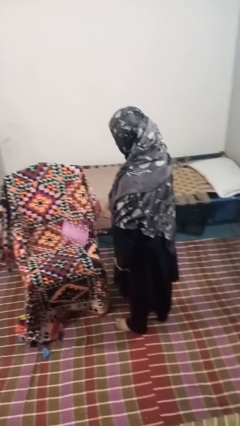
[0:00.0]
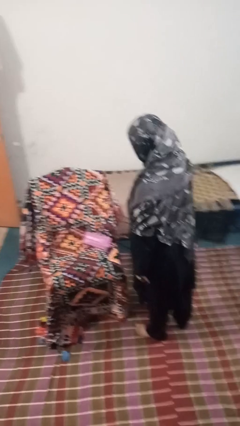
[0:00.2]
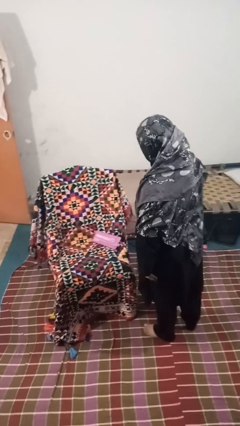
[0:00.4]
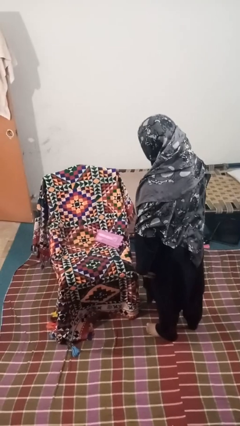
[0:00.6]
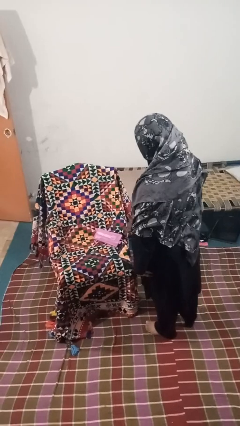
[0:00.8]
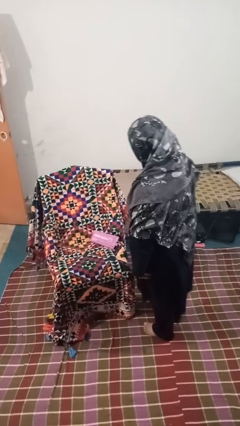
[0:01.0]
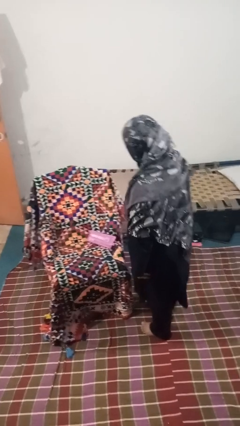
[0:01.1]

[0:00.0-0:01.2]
person puts down object on couch

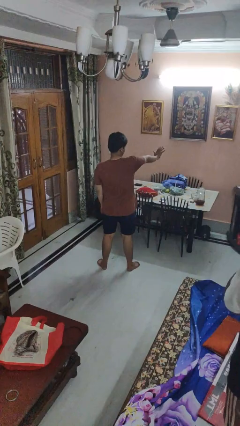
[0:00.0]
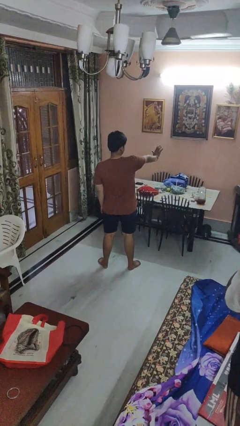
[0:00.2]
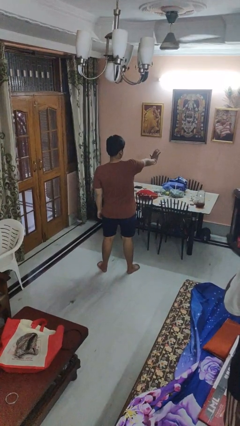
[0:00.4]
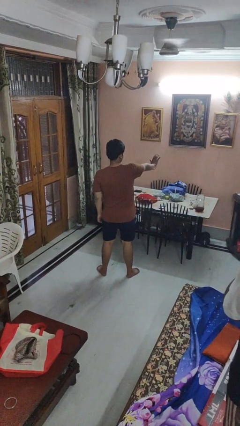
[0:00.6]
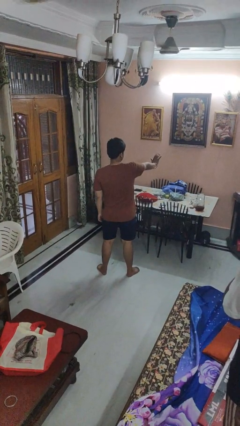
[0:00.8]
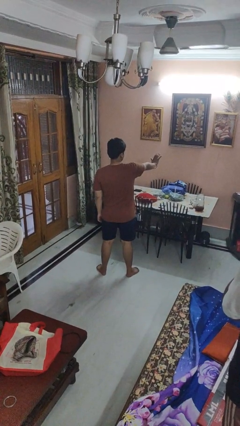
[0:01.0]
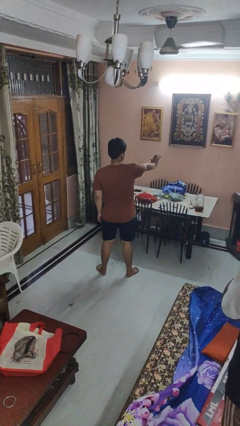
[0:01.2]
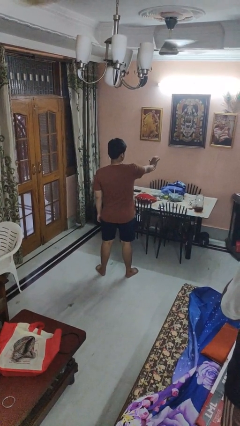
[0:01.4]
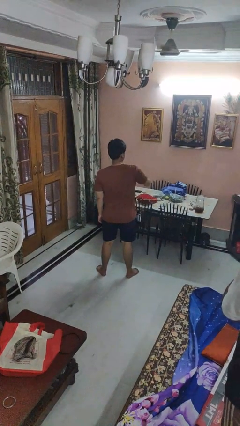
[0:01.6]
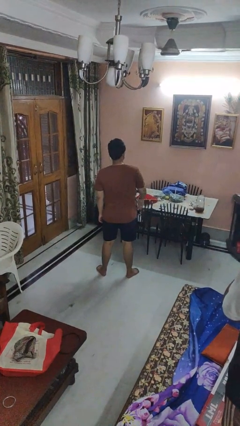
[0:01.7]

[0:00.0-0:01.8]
person gestures stop

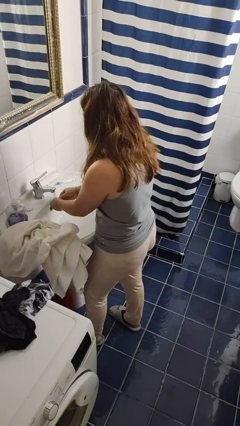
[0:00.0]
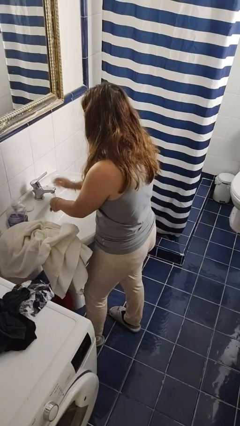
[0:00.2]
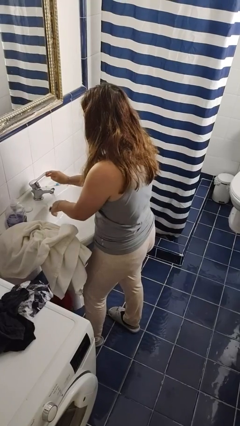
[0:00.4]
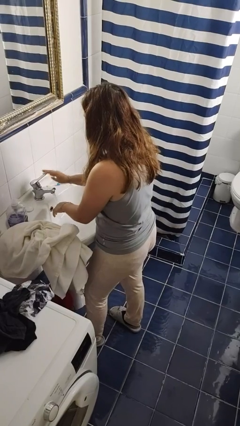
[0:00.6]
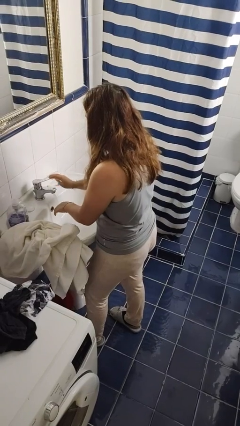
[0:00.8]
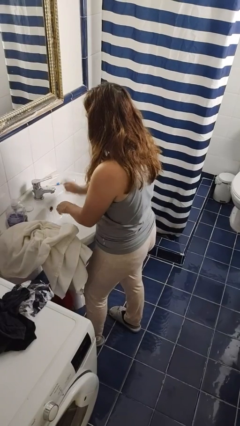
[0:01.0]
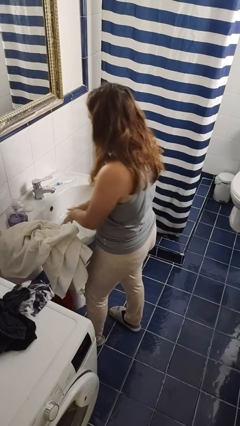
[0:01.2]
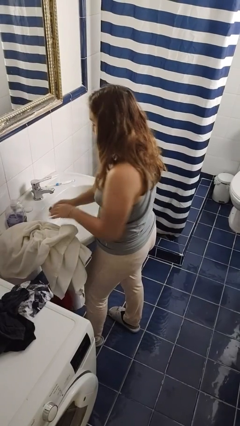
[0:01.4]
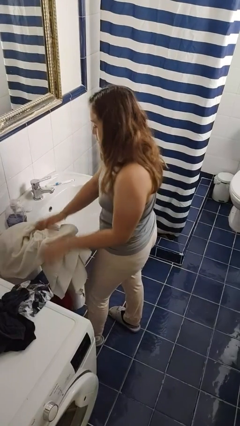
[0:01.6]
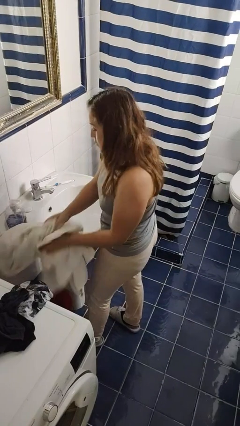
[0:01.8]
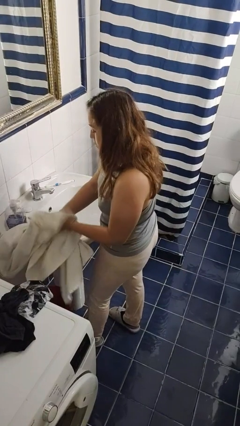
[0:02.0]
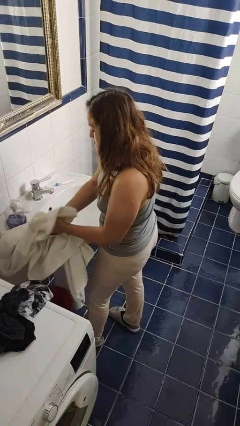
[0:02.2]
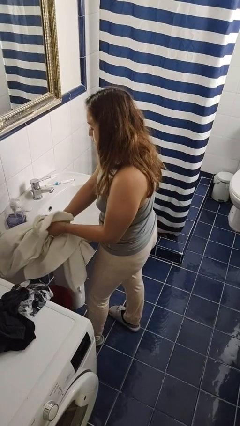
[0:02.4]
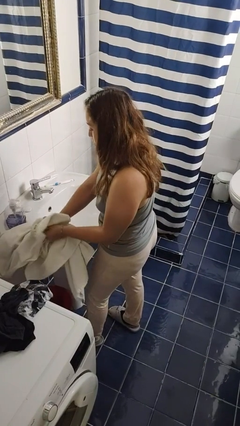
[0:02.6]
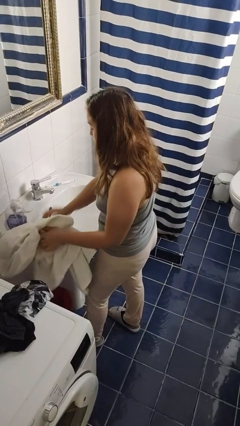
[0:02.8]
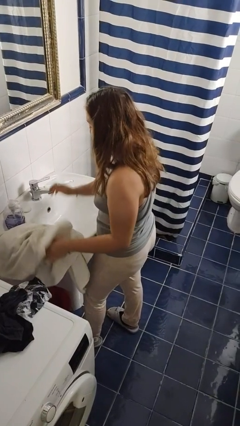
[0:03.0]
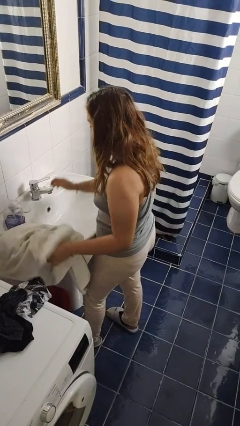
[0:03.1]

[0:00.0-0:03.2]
person dries hands with towel

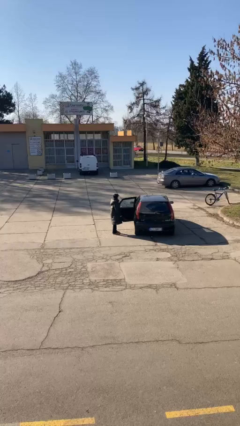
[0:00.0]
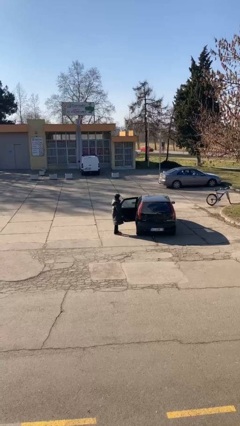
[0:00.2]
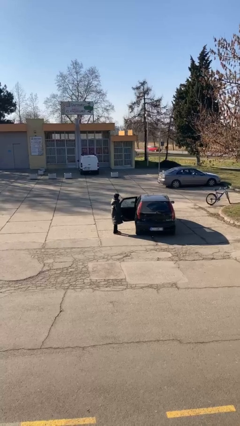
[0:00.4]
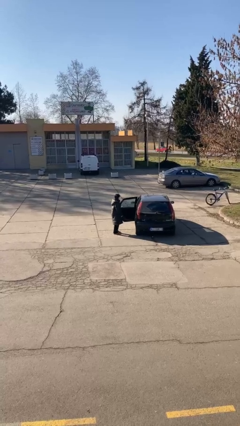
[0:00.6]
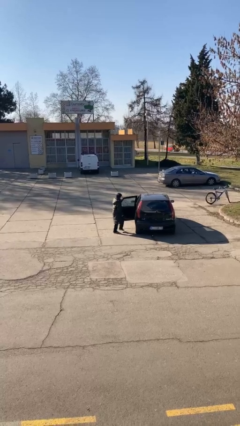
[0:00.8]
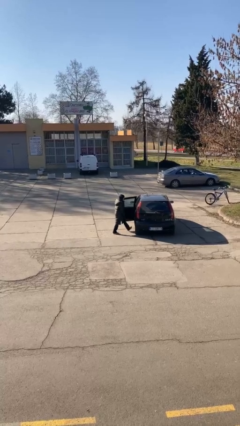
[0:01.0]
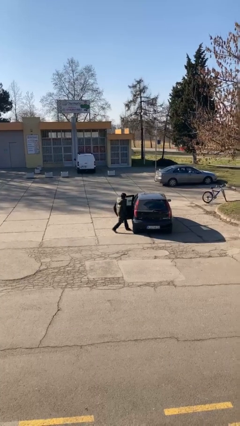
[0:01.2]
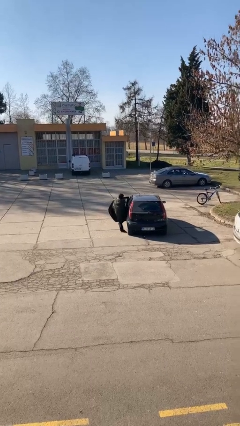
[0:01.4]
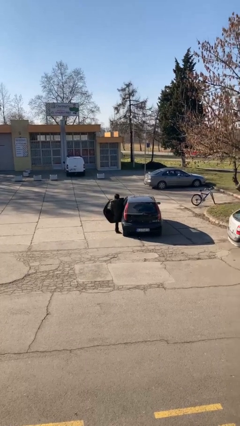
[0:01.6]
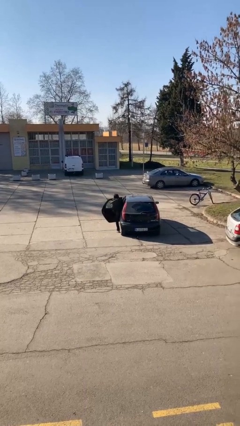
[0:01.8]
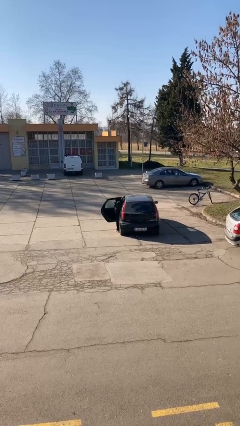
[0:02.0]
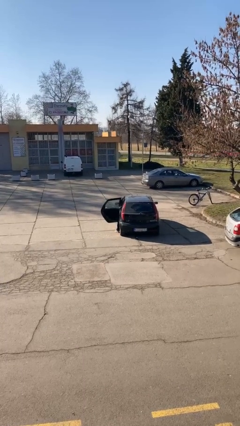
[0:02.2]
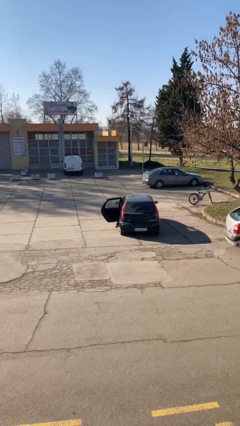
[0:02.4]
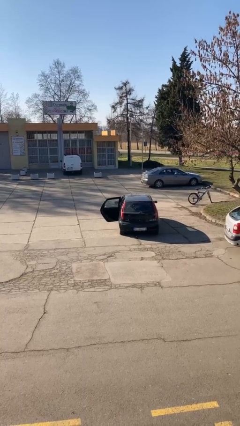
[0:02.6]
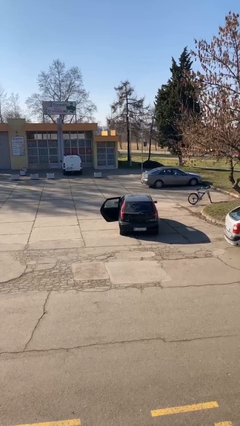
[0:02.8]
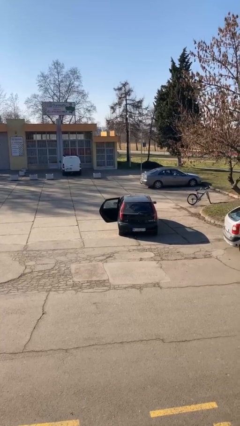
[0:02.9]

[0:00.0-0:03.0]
person enters car

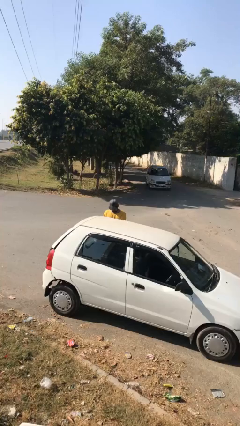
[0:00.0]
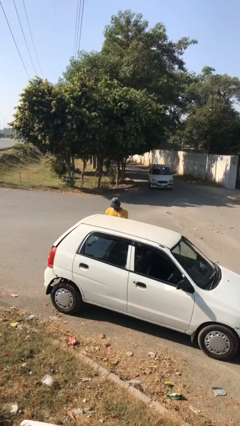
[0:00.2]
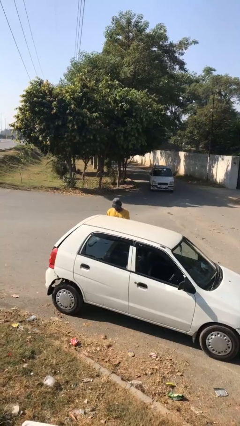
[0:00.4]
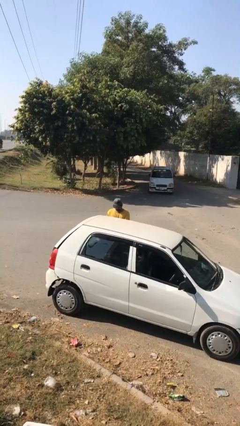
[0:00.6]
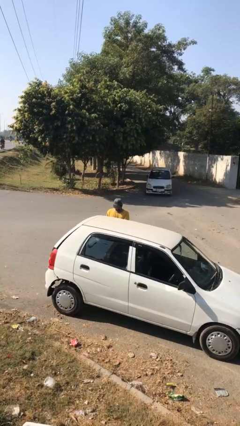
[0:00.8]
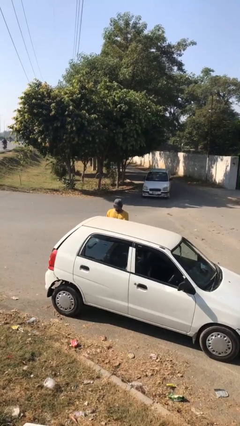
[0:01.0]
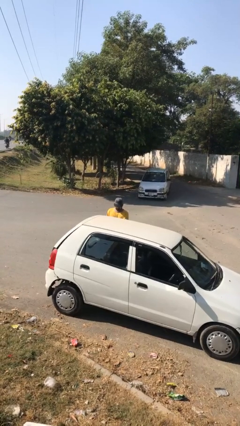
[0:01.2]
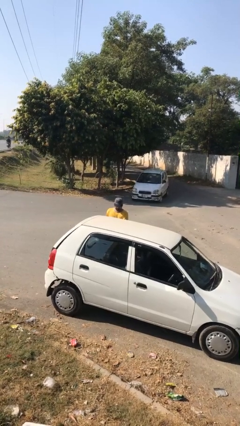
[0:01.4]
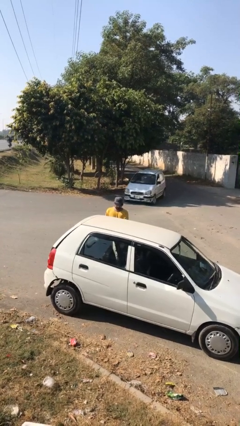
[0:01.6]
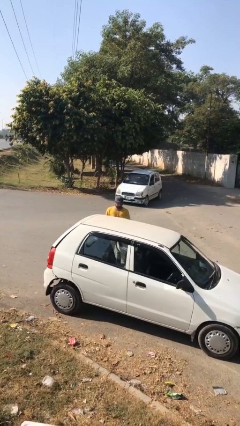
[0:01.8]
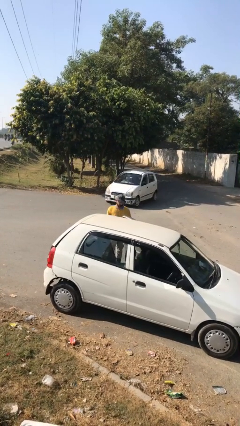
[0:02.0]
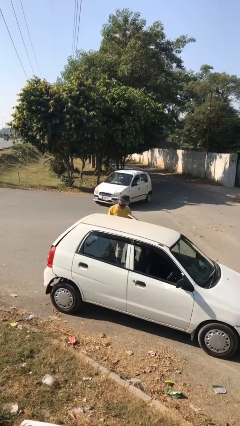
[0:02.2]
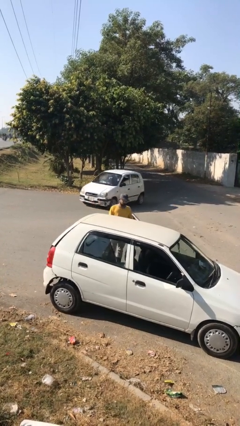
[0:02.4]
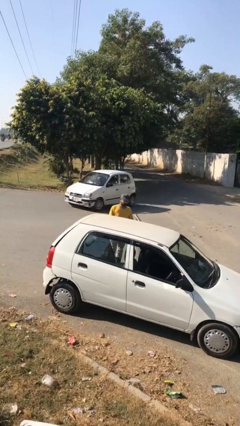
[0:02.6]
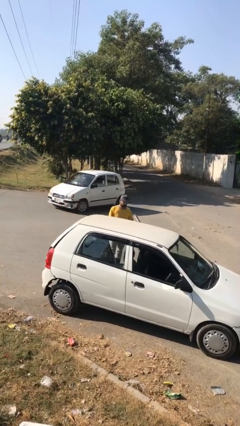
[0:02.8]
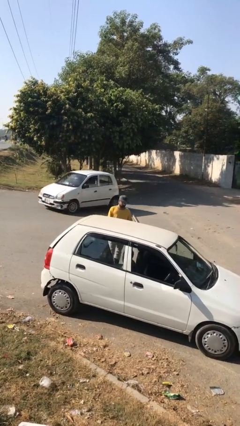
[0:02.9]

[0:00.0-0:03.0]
person opens car door

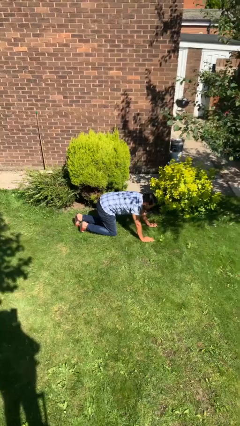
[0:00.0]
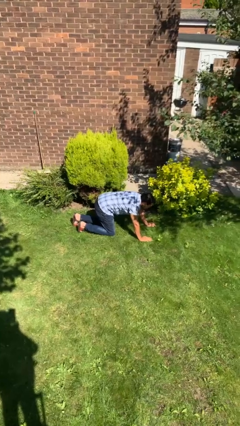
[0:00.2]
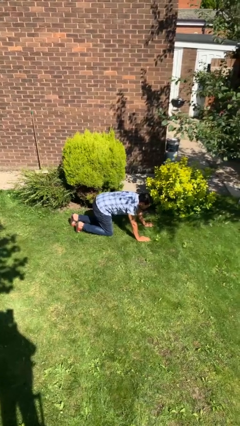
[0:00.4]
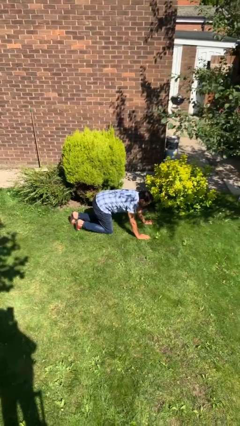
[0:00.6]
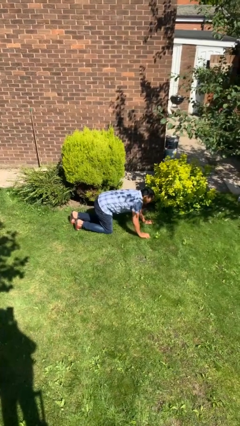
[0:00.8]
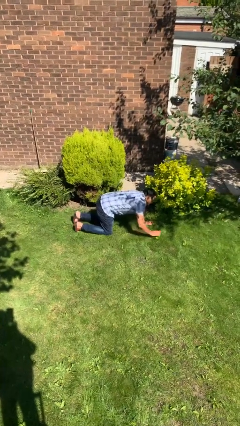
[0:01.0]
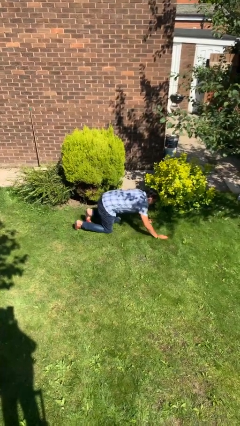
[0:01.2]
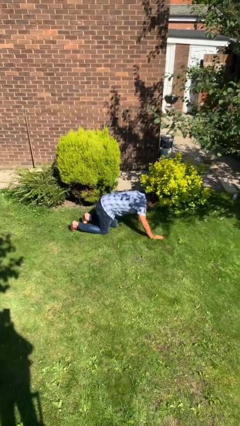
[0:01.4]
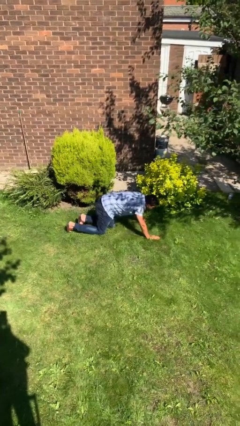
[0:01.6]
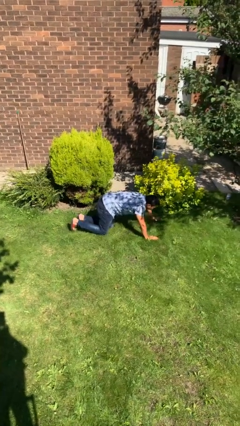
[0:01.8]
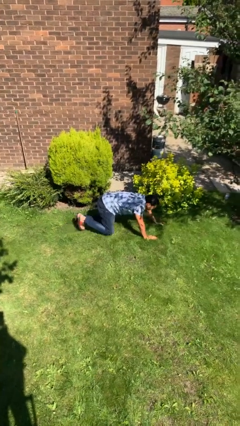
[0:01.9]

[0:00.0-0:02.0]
person crawls

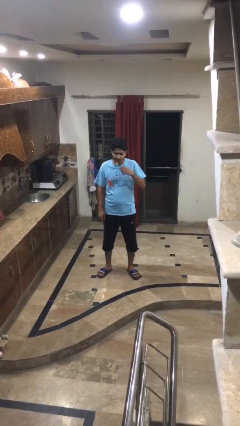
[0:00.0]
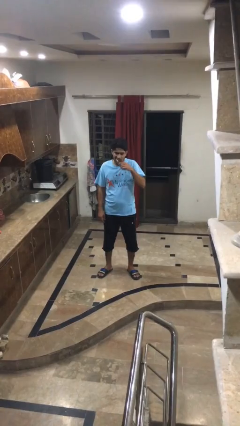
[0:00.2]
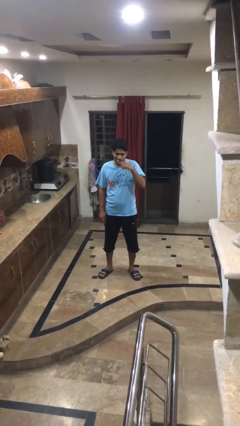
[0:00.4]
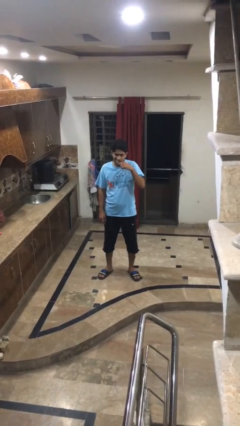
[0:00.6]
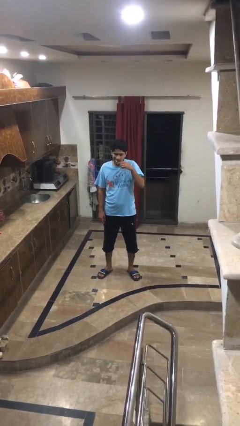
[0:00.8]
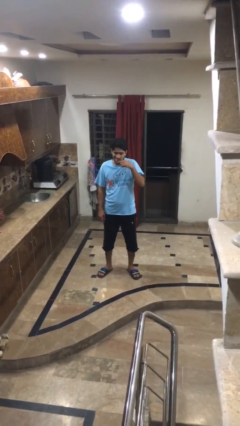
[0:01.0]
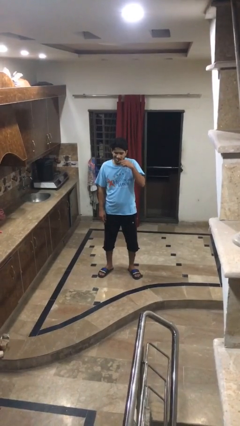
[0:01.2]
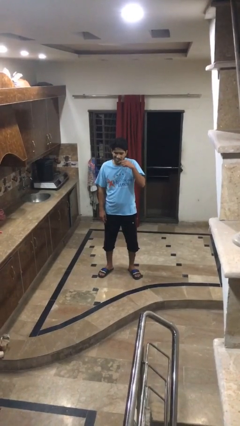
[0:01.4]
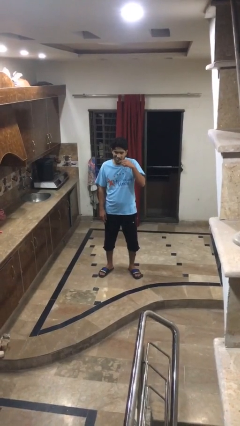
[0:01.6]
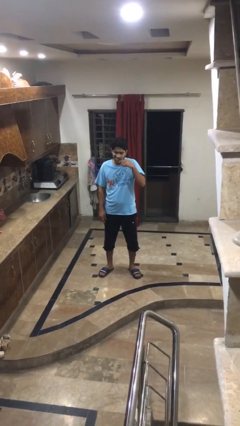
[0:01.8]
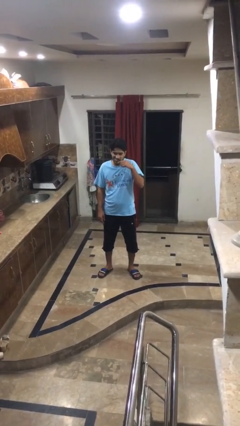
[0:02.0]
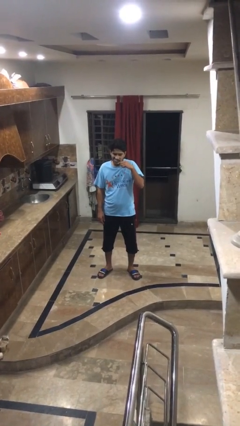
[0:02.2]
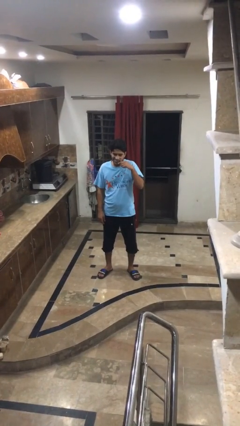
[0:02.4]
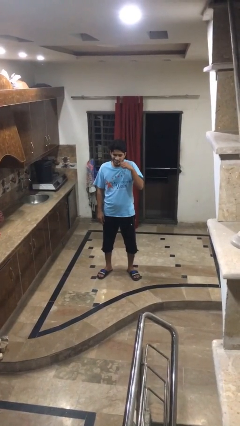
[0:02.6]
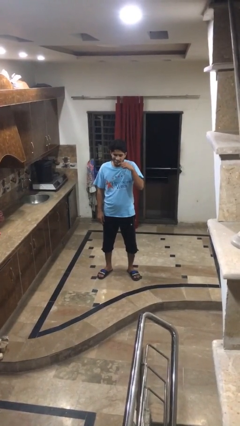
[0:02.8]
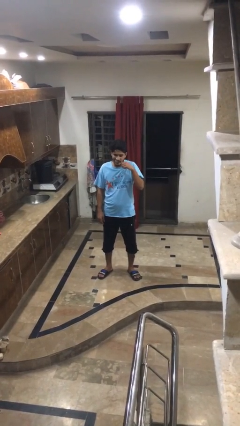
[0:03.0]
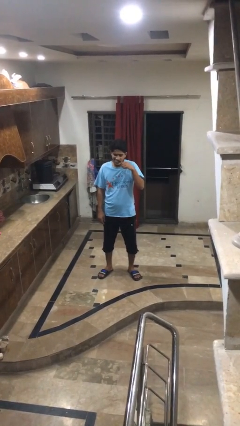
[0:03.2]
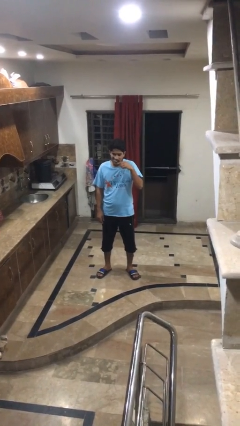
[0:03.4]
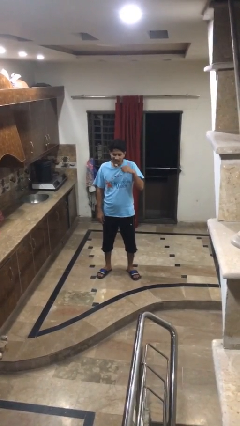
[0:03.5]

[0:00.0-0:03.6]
person brushes teeth
